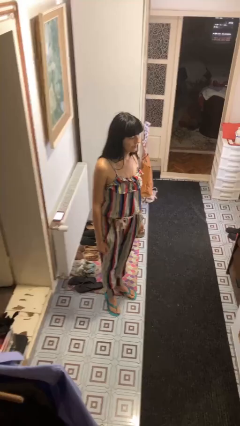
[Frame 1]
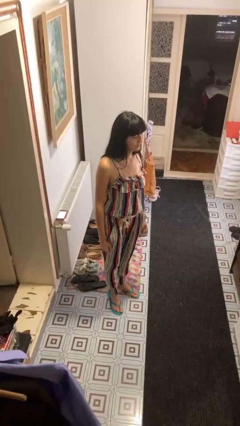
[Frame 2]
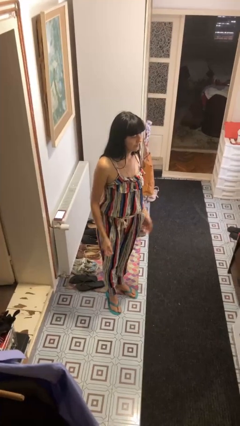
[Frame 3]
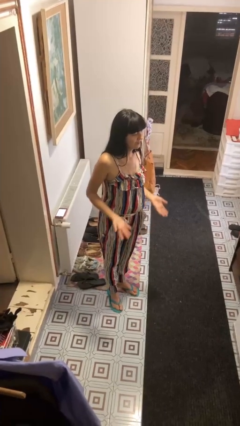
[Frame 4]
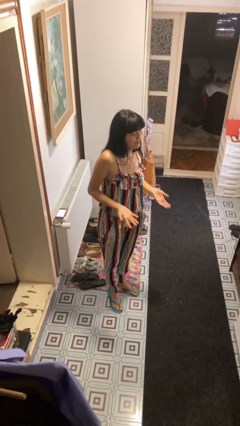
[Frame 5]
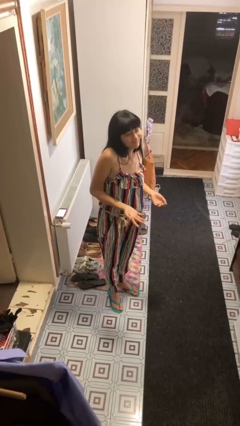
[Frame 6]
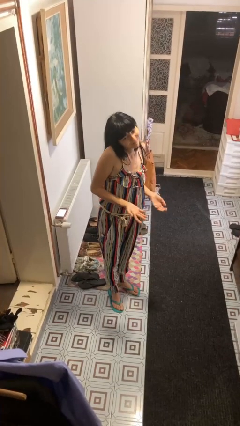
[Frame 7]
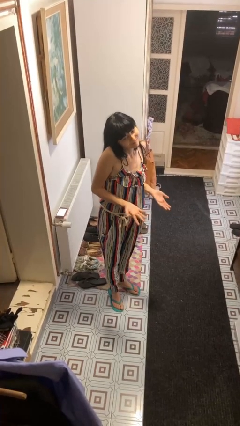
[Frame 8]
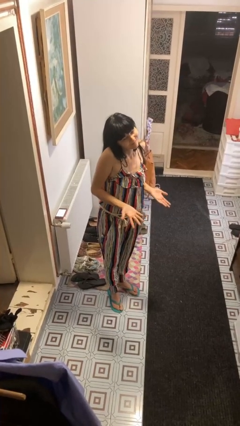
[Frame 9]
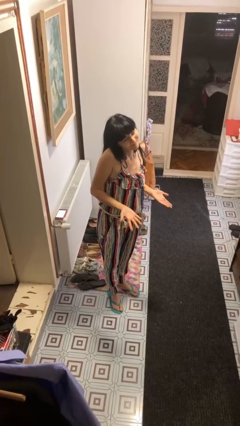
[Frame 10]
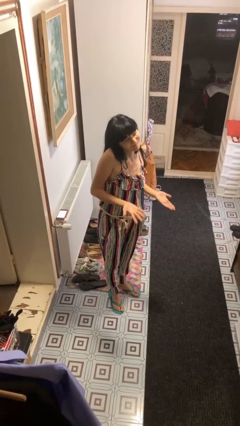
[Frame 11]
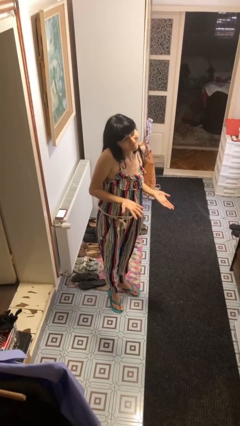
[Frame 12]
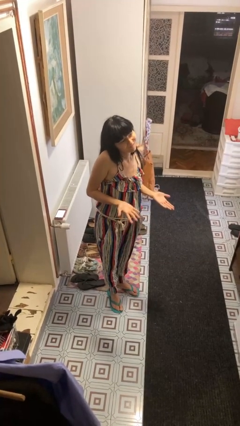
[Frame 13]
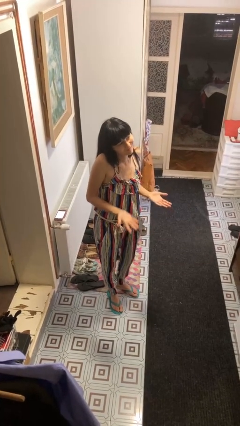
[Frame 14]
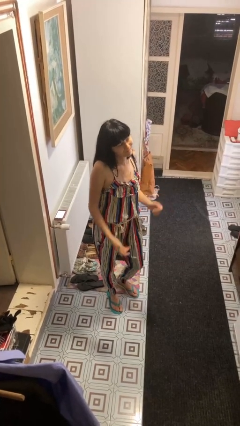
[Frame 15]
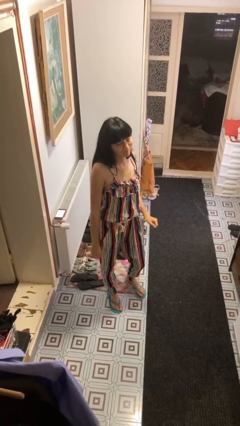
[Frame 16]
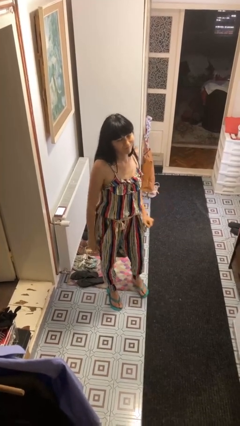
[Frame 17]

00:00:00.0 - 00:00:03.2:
person shrugs

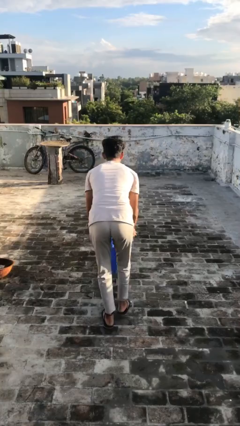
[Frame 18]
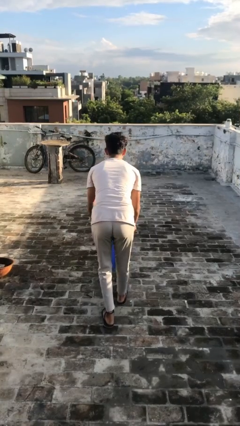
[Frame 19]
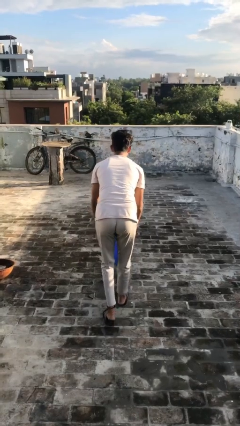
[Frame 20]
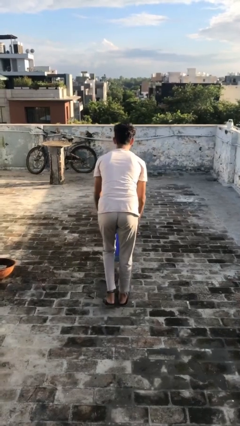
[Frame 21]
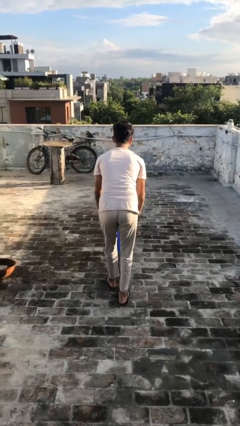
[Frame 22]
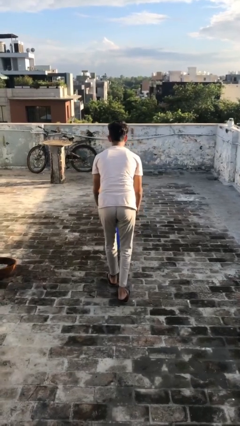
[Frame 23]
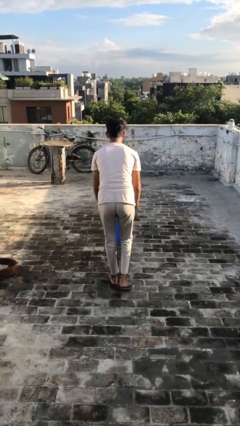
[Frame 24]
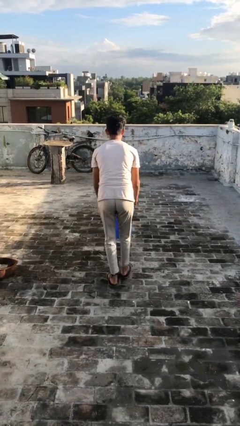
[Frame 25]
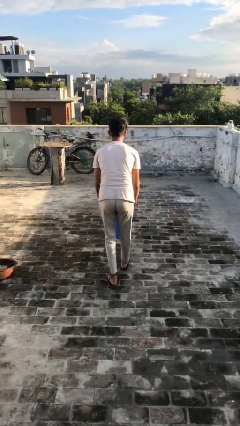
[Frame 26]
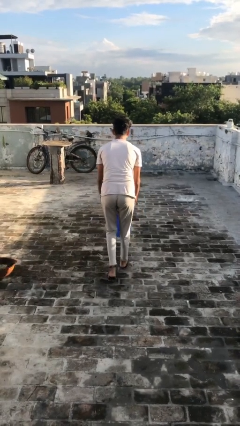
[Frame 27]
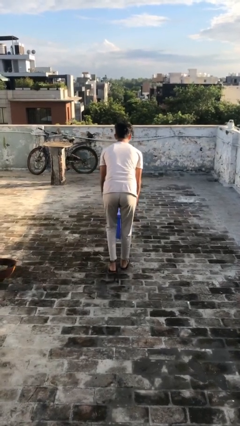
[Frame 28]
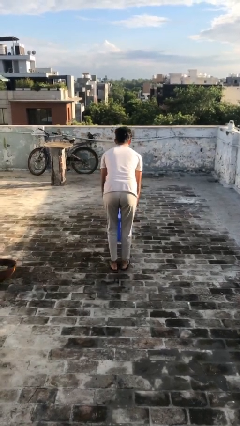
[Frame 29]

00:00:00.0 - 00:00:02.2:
person pushes wheeled trashcan

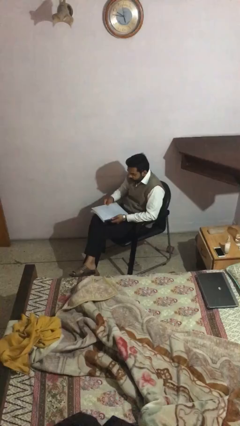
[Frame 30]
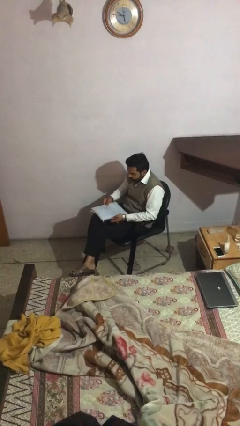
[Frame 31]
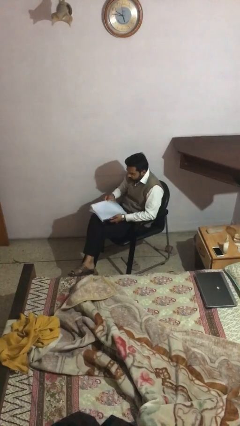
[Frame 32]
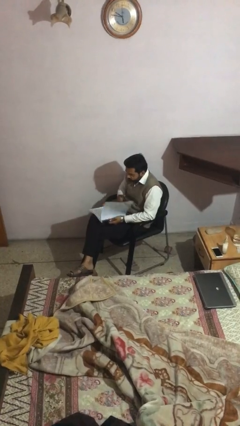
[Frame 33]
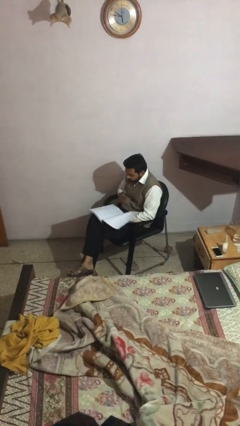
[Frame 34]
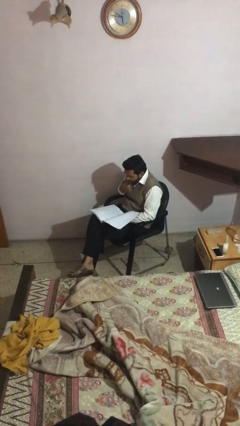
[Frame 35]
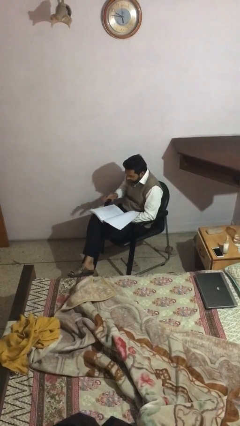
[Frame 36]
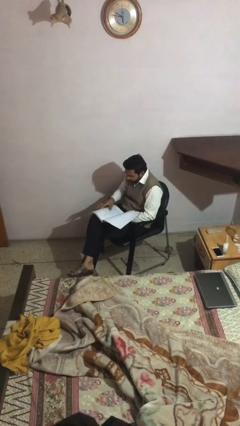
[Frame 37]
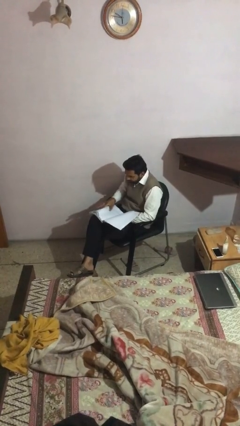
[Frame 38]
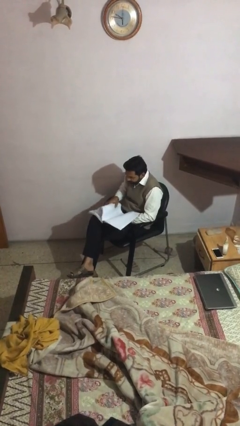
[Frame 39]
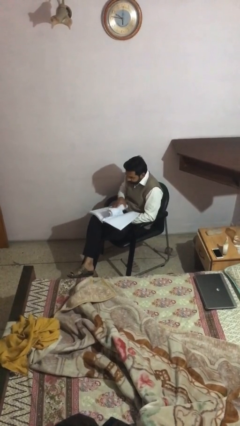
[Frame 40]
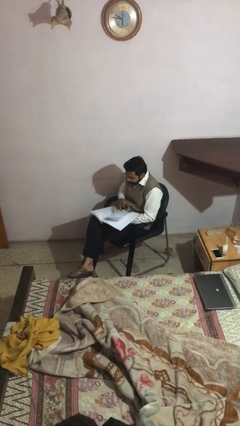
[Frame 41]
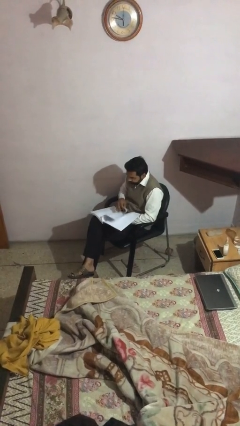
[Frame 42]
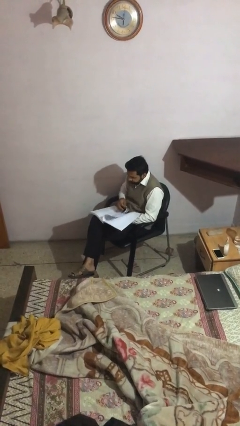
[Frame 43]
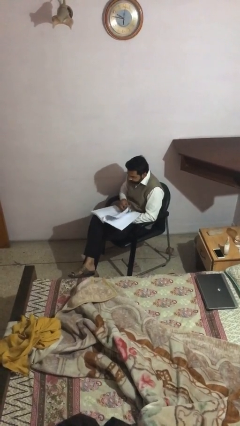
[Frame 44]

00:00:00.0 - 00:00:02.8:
person reads document

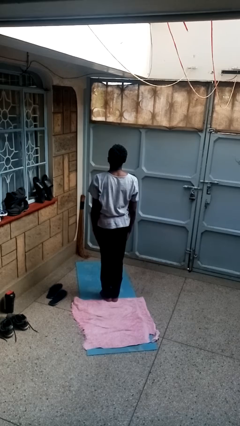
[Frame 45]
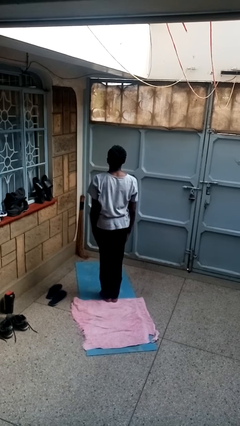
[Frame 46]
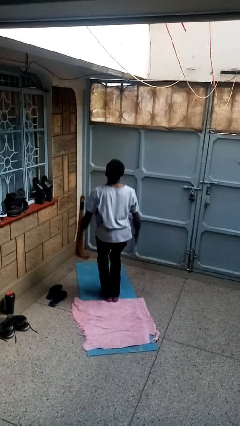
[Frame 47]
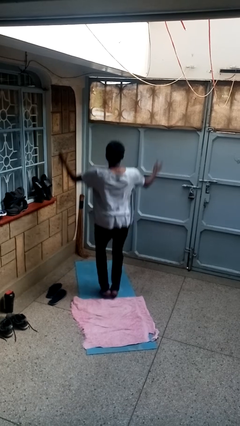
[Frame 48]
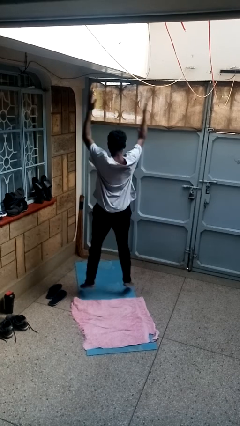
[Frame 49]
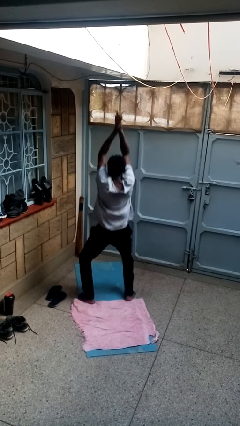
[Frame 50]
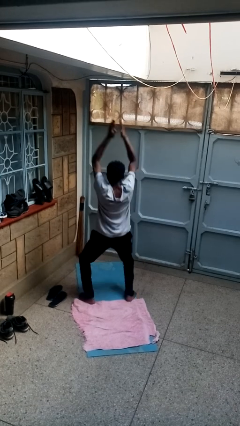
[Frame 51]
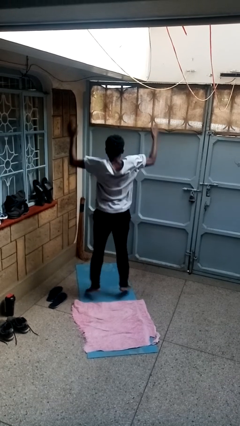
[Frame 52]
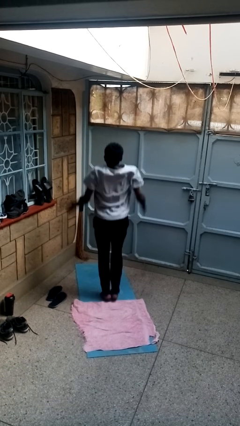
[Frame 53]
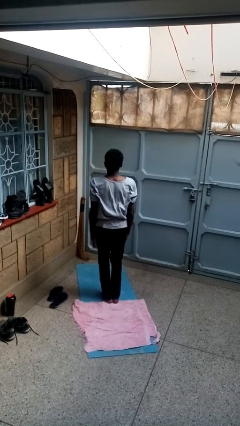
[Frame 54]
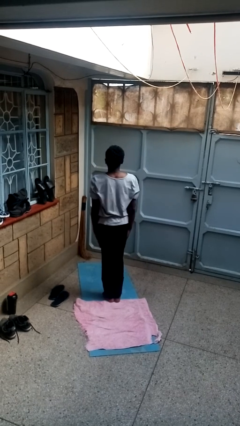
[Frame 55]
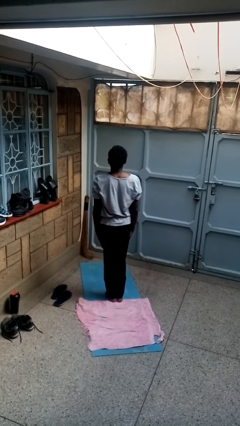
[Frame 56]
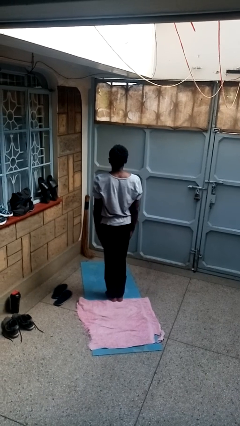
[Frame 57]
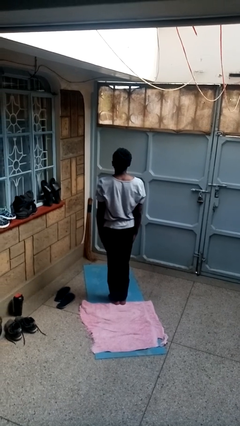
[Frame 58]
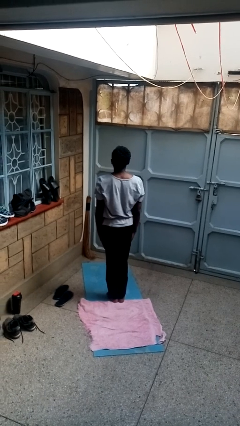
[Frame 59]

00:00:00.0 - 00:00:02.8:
person exercises with jumping jacks

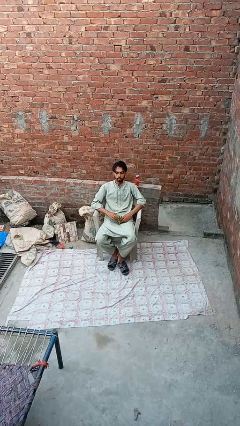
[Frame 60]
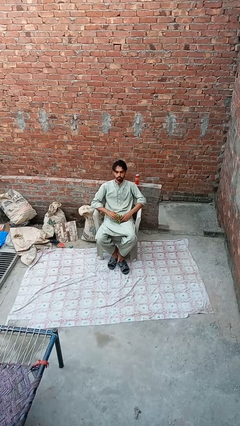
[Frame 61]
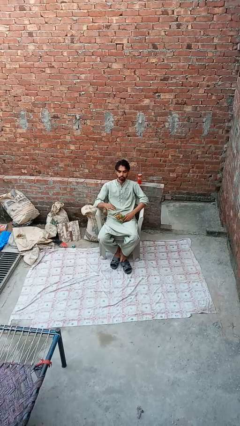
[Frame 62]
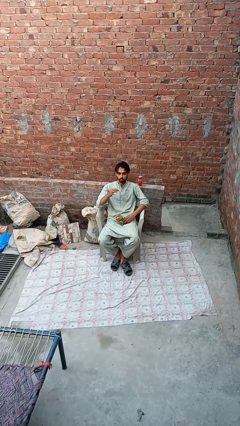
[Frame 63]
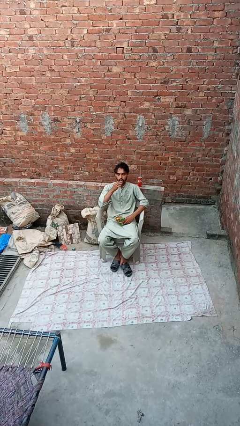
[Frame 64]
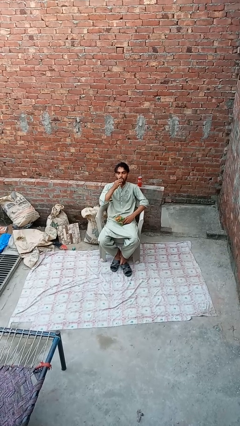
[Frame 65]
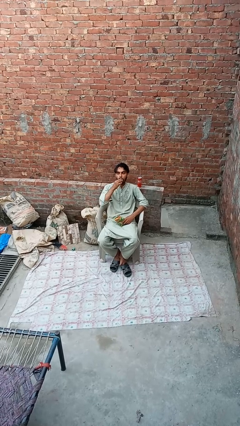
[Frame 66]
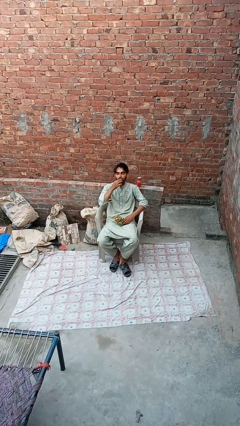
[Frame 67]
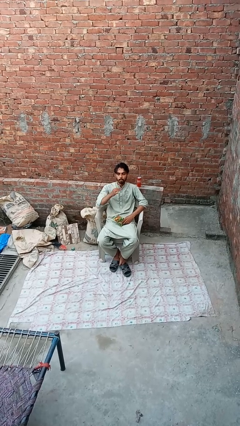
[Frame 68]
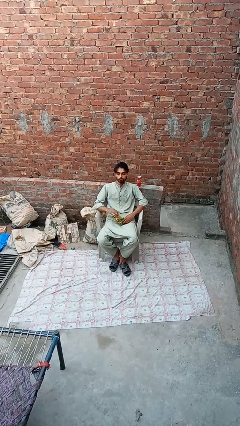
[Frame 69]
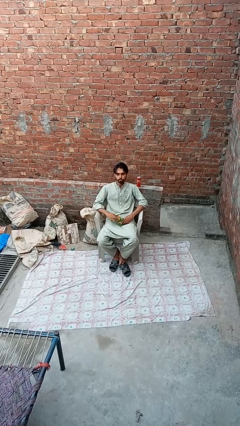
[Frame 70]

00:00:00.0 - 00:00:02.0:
person eats snack from bag

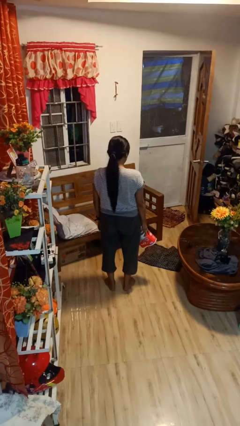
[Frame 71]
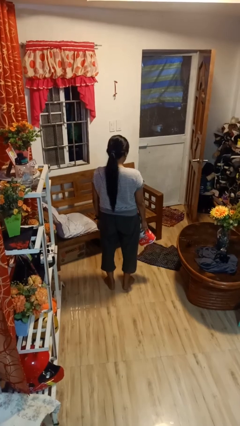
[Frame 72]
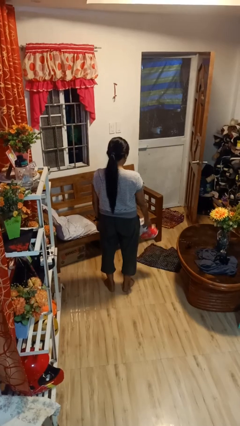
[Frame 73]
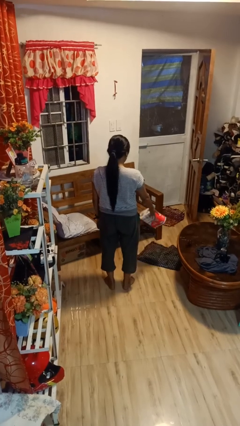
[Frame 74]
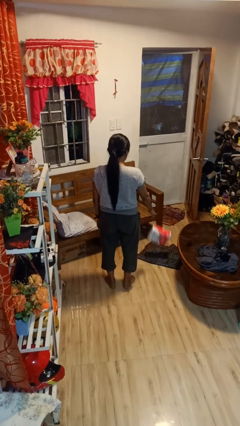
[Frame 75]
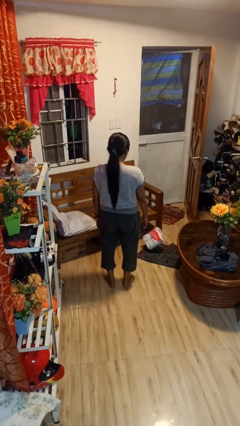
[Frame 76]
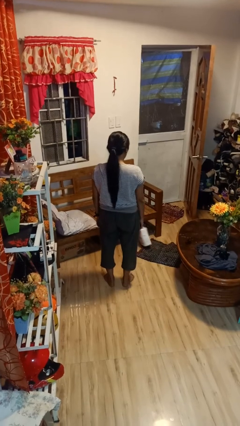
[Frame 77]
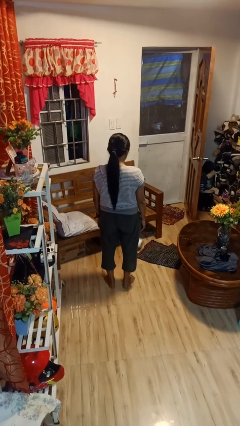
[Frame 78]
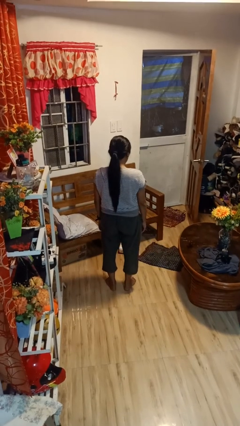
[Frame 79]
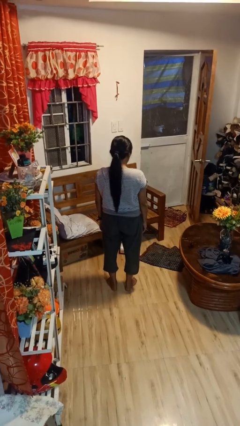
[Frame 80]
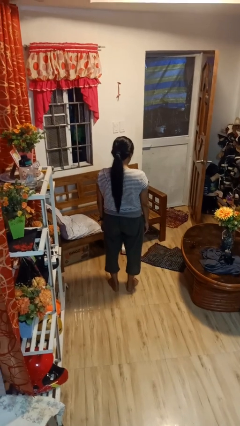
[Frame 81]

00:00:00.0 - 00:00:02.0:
person throws object to ground

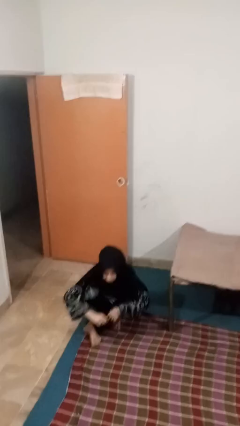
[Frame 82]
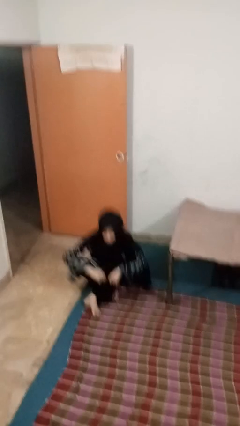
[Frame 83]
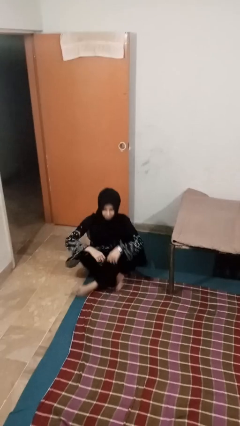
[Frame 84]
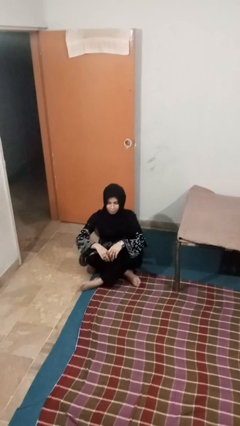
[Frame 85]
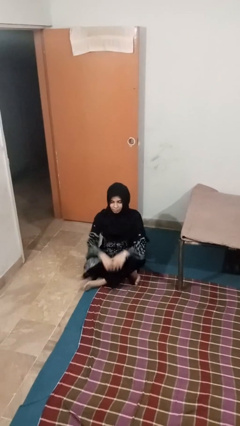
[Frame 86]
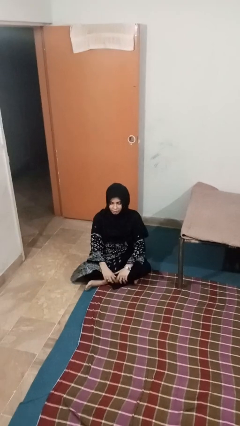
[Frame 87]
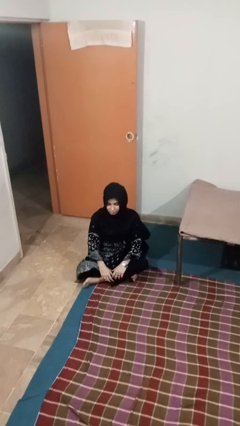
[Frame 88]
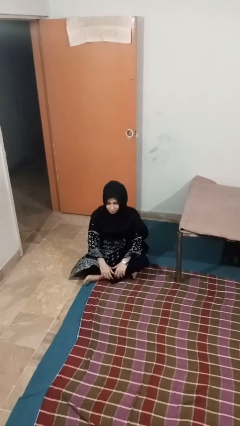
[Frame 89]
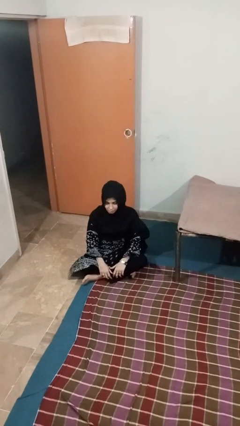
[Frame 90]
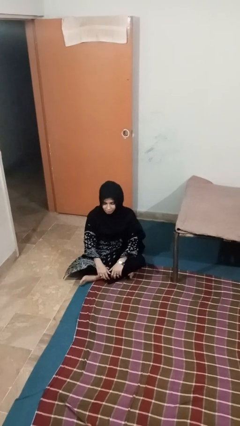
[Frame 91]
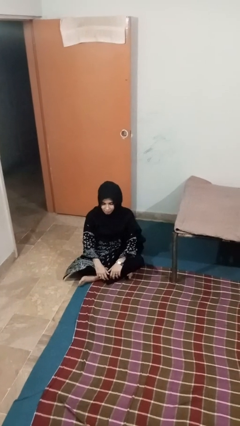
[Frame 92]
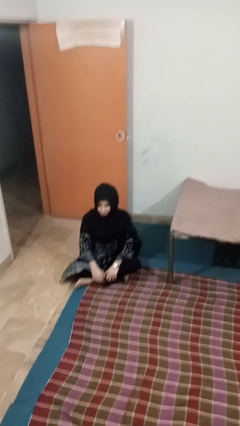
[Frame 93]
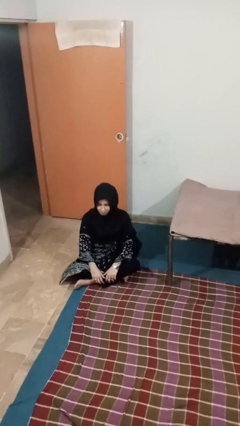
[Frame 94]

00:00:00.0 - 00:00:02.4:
person sits crisscross
